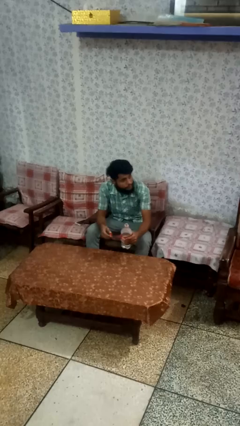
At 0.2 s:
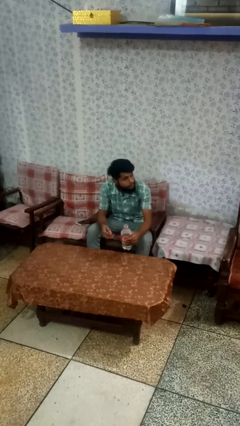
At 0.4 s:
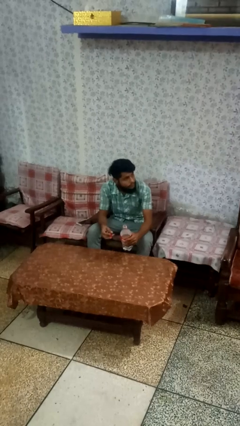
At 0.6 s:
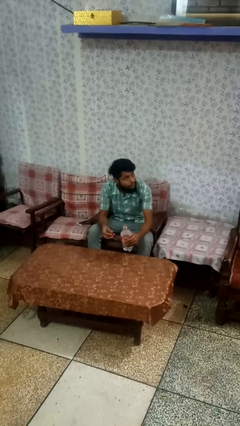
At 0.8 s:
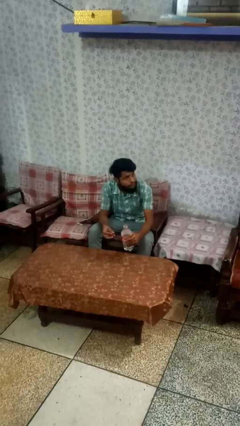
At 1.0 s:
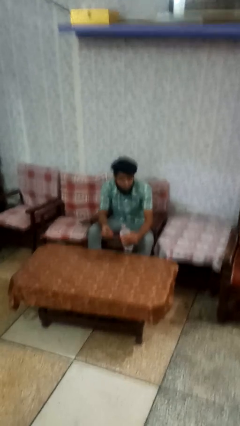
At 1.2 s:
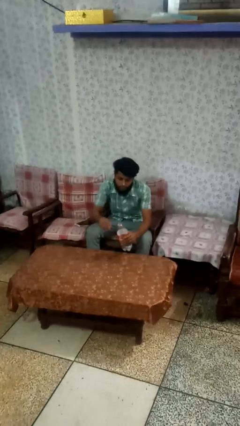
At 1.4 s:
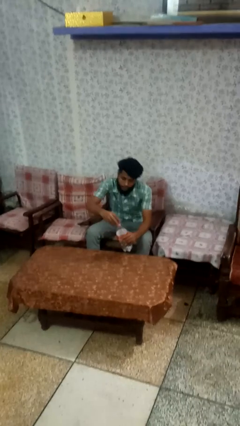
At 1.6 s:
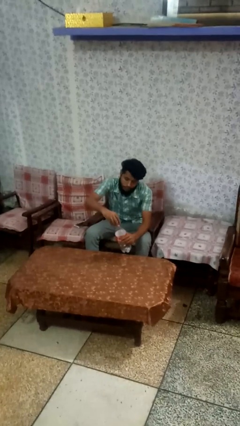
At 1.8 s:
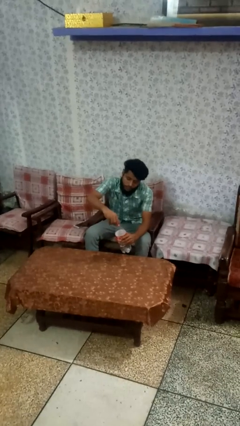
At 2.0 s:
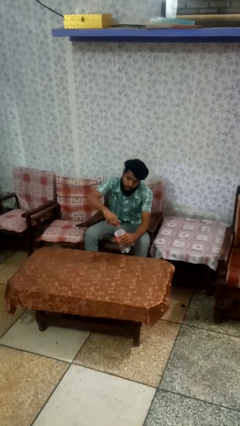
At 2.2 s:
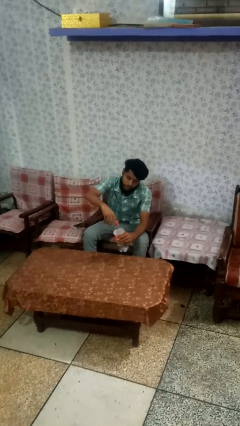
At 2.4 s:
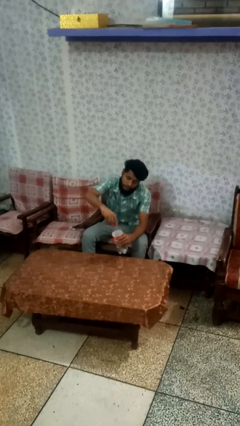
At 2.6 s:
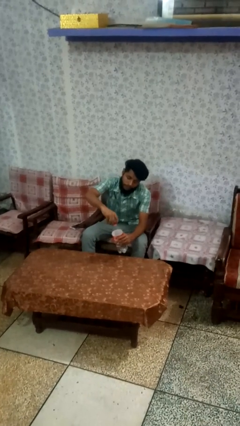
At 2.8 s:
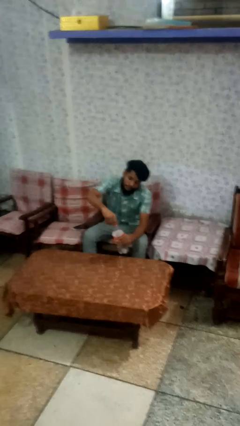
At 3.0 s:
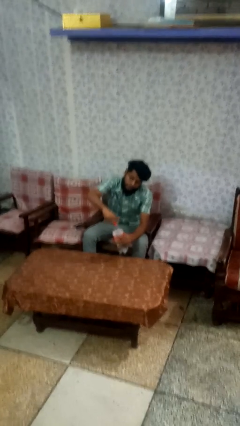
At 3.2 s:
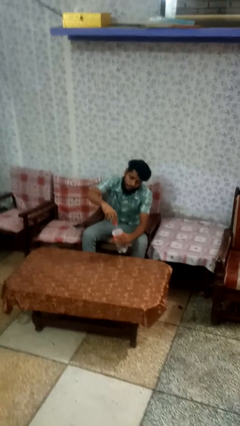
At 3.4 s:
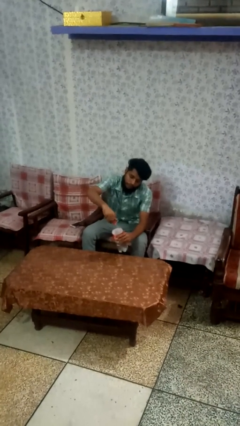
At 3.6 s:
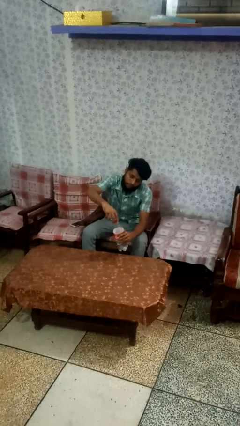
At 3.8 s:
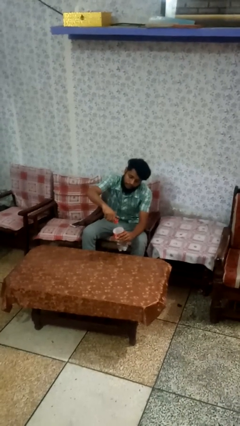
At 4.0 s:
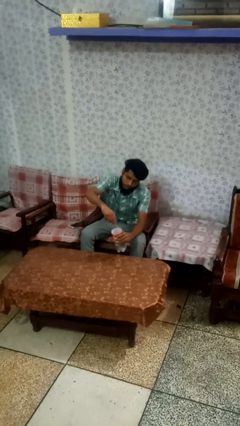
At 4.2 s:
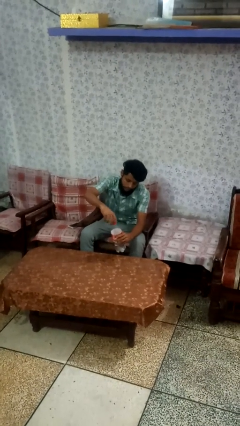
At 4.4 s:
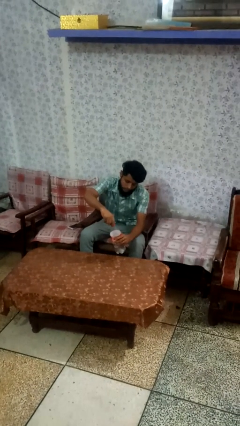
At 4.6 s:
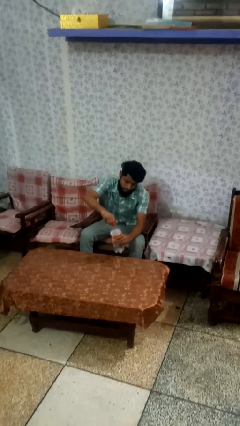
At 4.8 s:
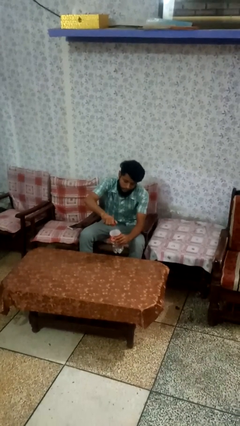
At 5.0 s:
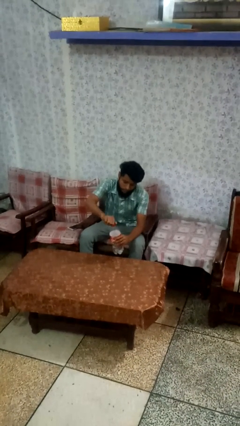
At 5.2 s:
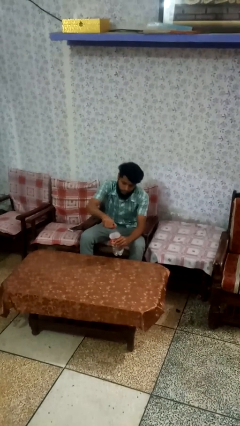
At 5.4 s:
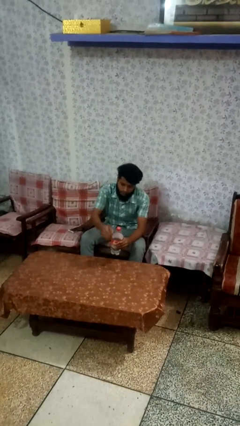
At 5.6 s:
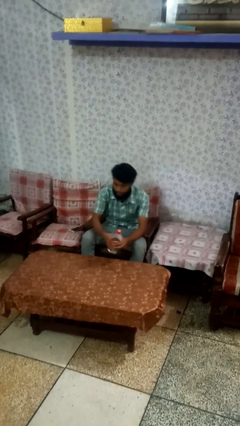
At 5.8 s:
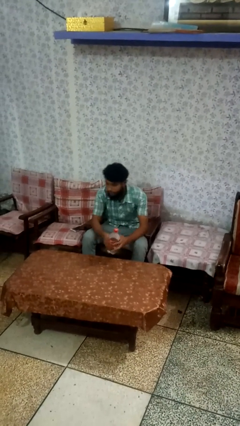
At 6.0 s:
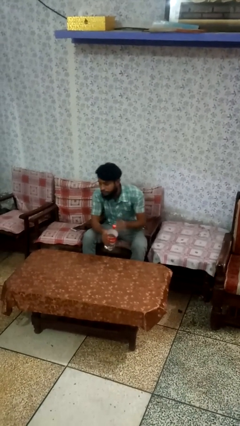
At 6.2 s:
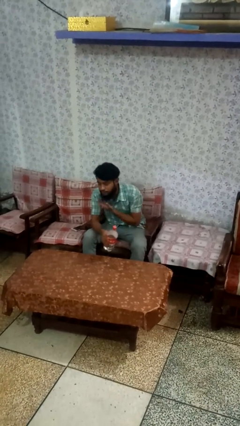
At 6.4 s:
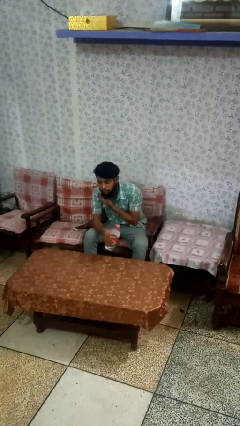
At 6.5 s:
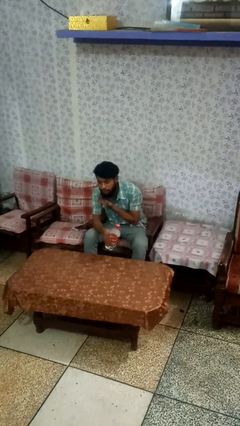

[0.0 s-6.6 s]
person screws lid to bottle

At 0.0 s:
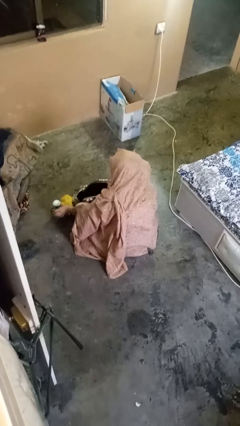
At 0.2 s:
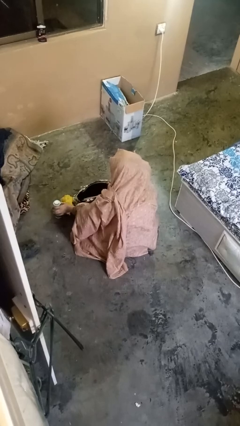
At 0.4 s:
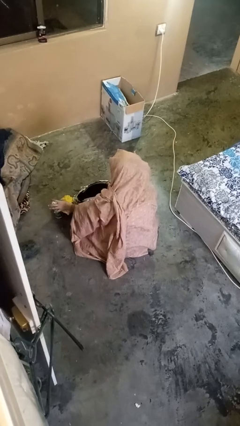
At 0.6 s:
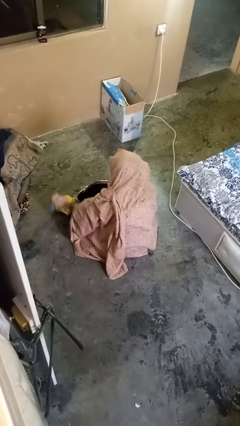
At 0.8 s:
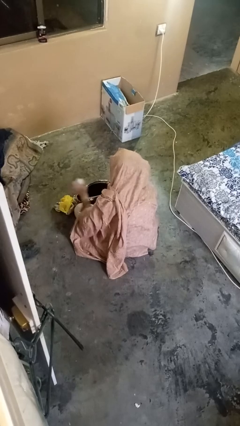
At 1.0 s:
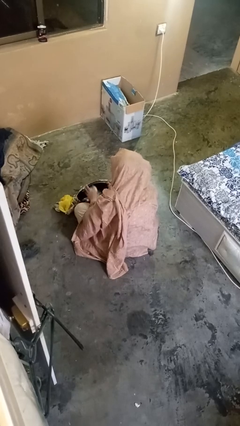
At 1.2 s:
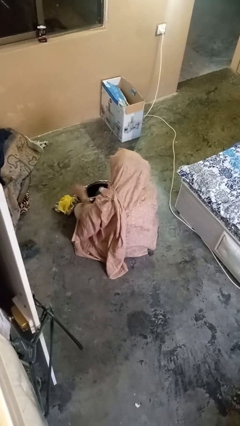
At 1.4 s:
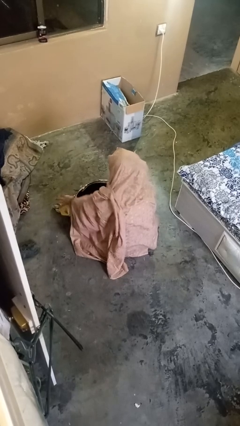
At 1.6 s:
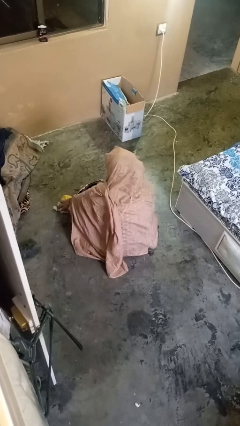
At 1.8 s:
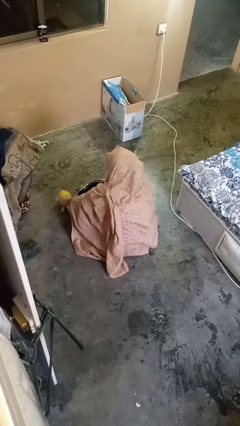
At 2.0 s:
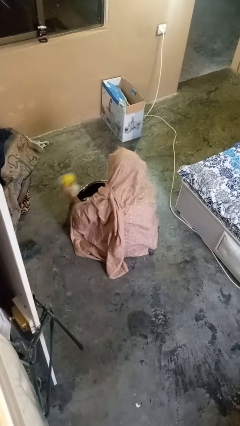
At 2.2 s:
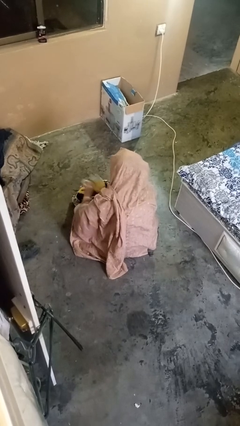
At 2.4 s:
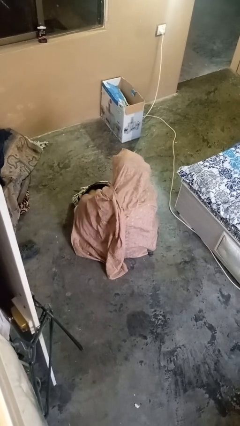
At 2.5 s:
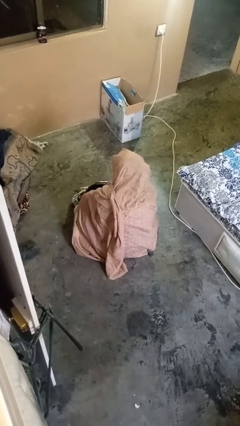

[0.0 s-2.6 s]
person puts object into purse

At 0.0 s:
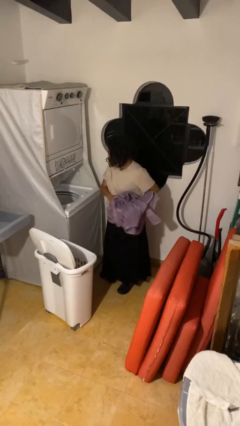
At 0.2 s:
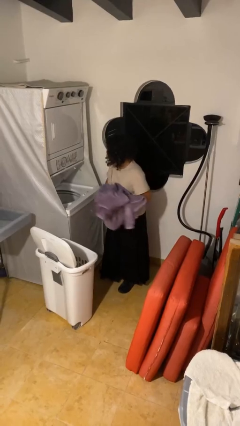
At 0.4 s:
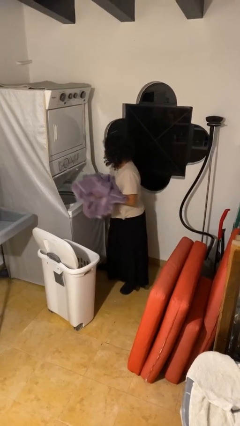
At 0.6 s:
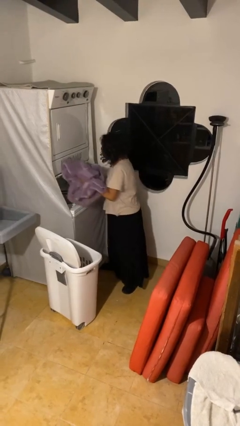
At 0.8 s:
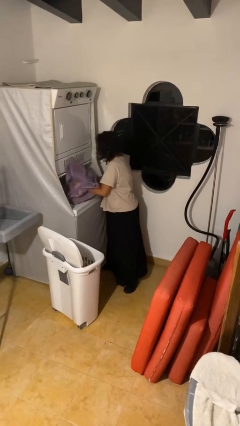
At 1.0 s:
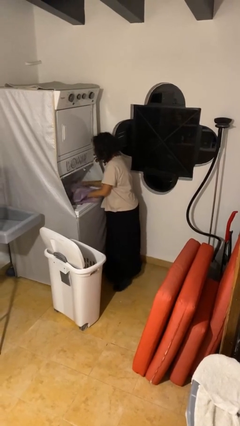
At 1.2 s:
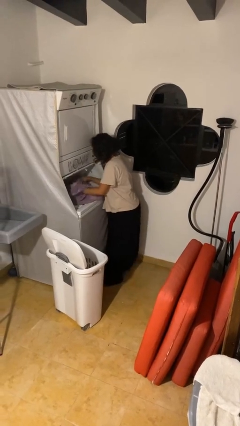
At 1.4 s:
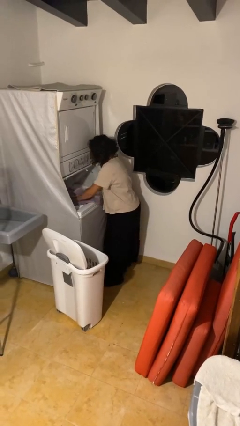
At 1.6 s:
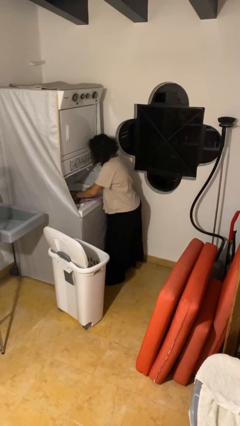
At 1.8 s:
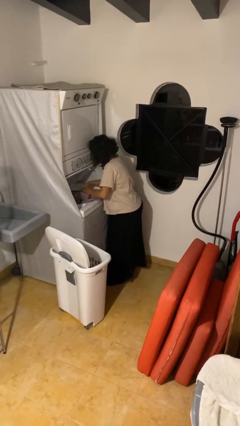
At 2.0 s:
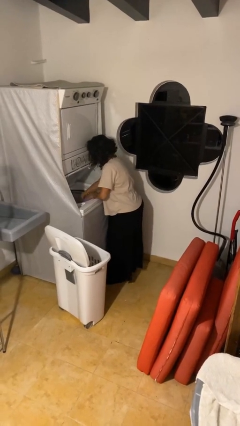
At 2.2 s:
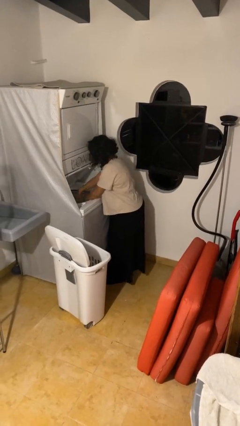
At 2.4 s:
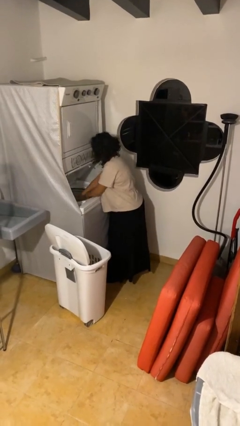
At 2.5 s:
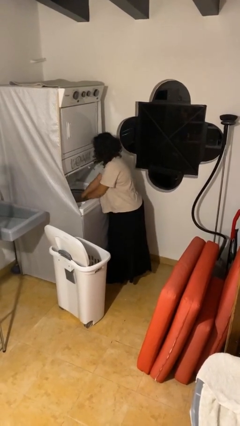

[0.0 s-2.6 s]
person loads clotheswasher

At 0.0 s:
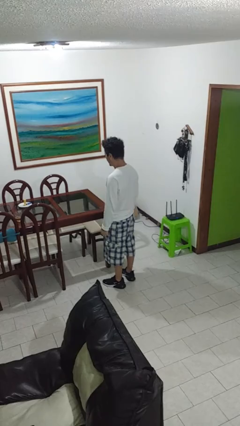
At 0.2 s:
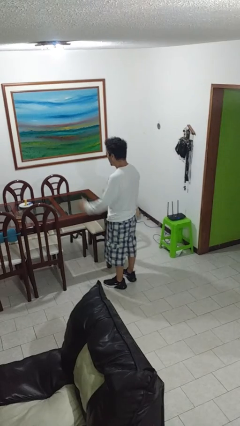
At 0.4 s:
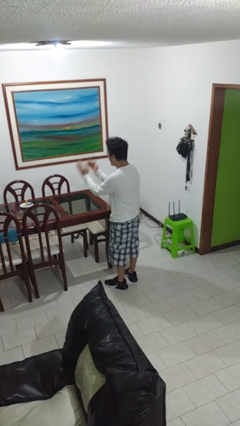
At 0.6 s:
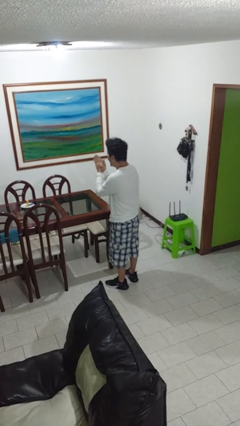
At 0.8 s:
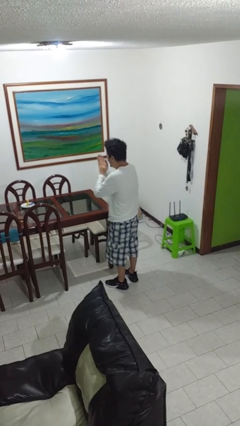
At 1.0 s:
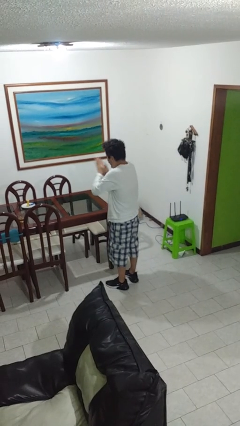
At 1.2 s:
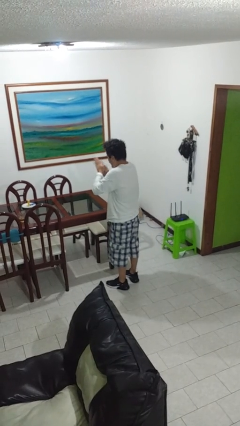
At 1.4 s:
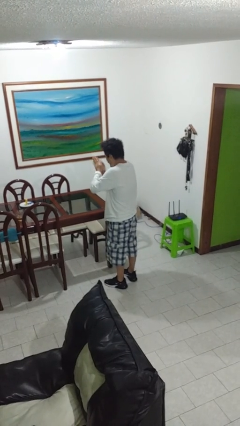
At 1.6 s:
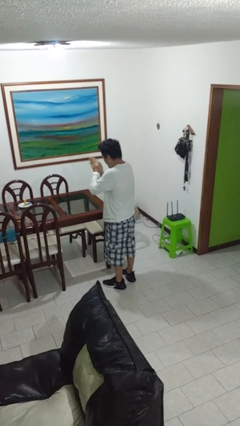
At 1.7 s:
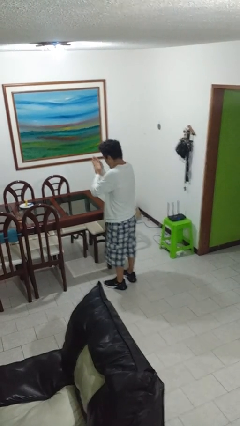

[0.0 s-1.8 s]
person blows into hands

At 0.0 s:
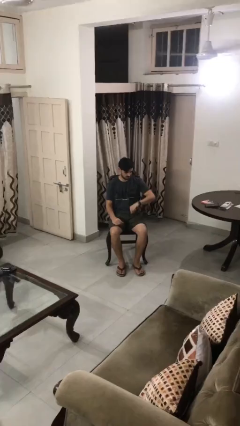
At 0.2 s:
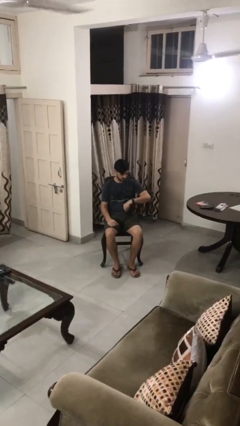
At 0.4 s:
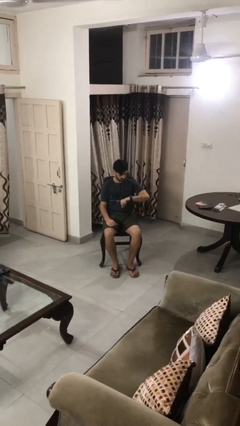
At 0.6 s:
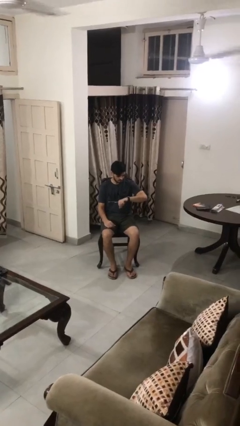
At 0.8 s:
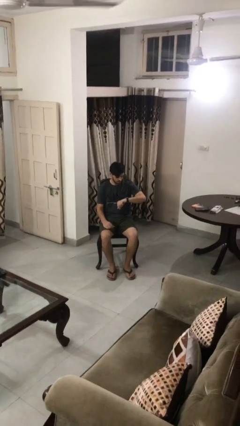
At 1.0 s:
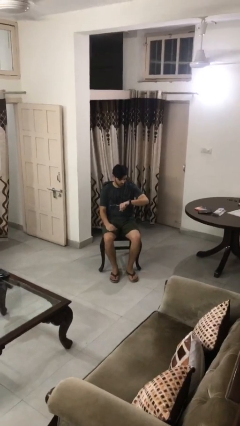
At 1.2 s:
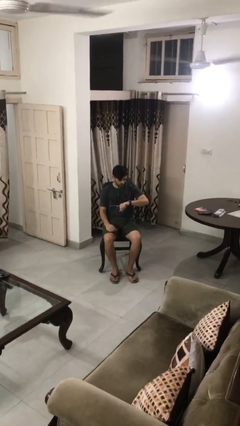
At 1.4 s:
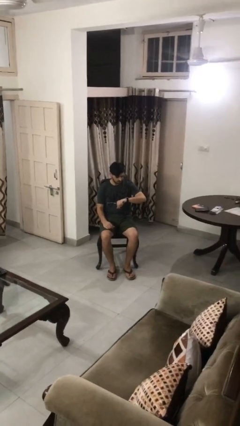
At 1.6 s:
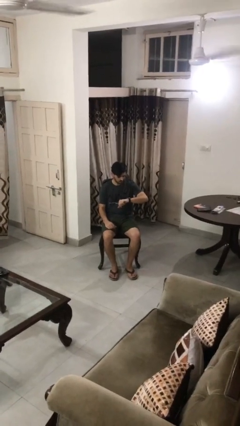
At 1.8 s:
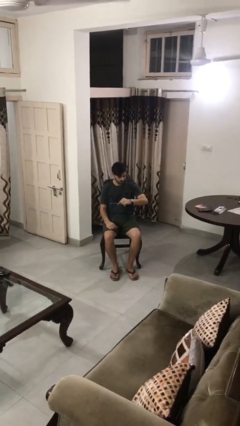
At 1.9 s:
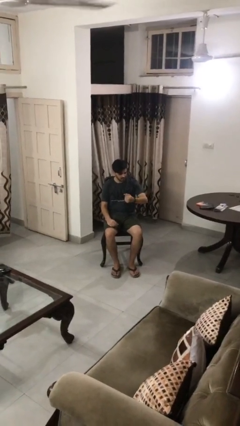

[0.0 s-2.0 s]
person looks at wristwatch

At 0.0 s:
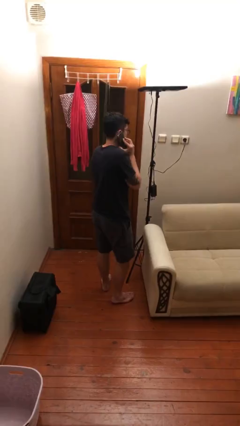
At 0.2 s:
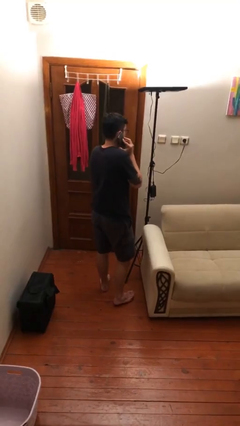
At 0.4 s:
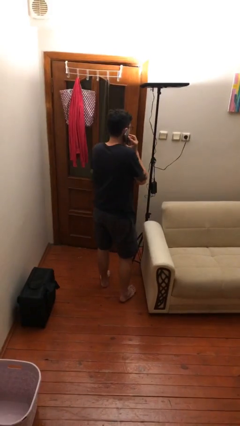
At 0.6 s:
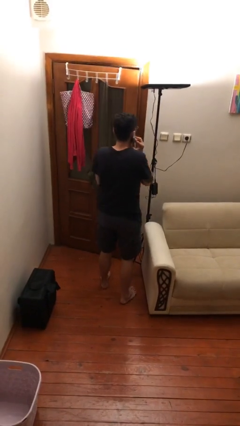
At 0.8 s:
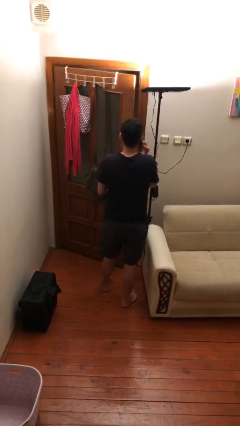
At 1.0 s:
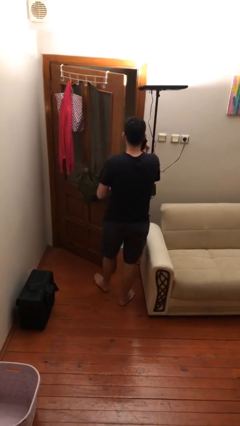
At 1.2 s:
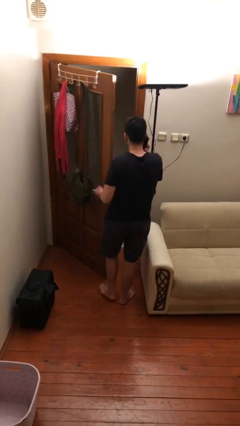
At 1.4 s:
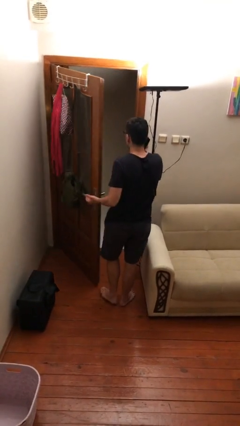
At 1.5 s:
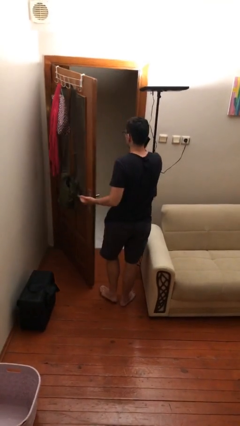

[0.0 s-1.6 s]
person opens facility door
